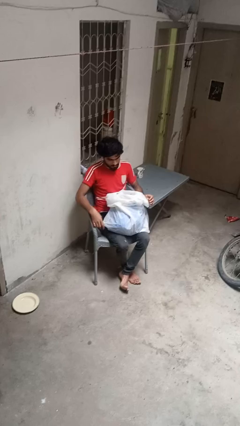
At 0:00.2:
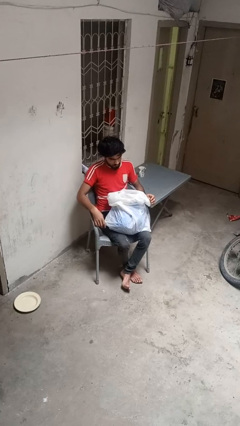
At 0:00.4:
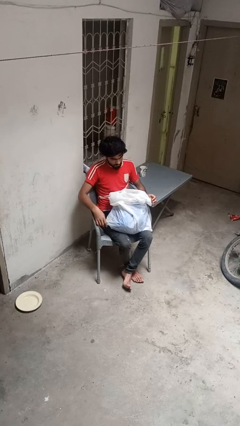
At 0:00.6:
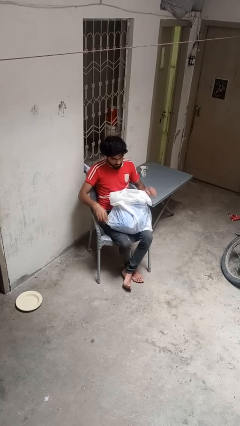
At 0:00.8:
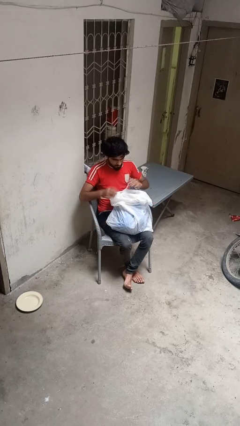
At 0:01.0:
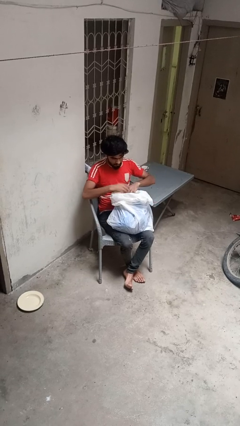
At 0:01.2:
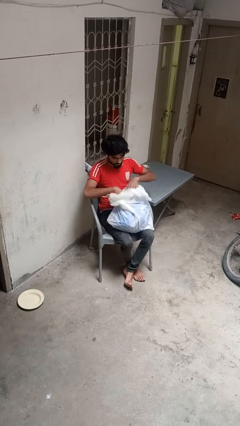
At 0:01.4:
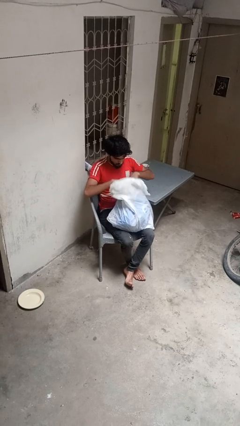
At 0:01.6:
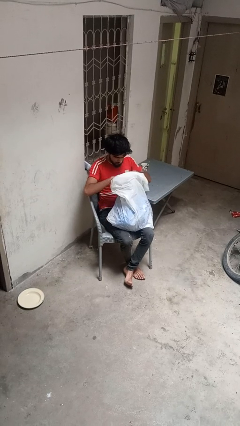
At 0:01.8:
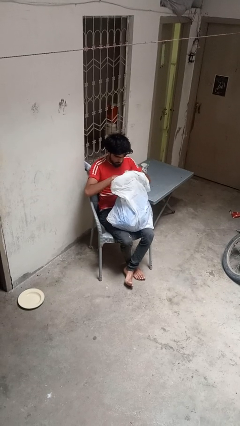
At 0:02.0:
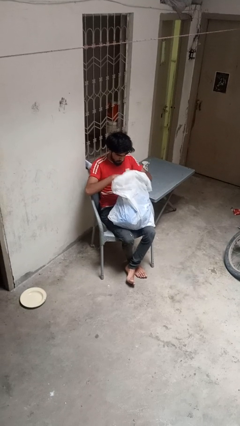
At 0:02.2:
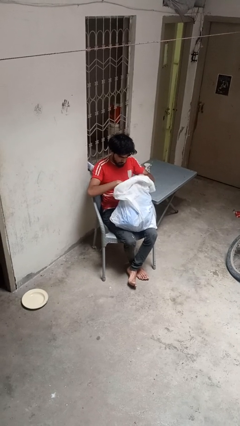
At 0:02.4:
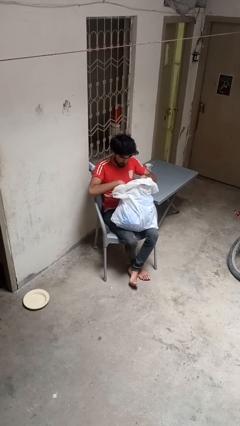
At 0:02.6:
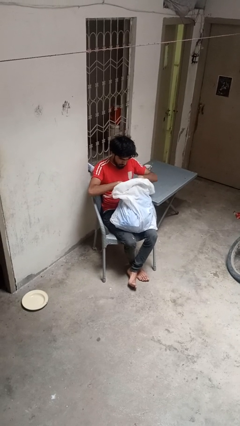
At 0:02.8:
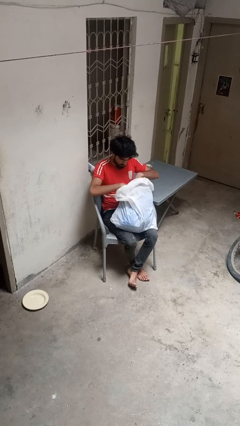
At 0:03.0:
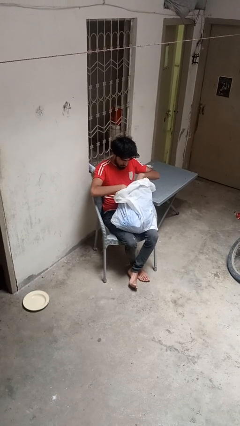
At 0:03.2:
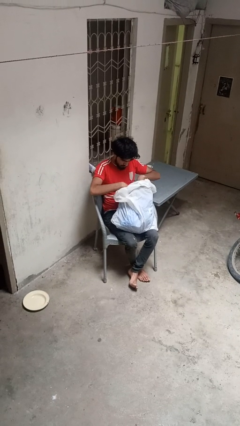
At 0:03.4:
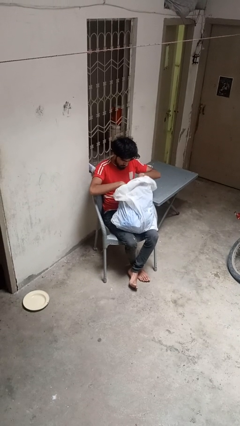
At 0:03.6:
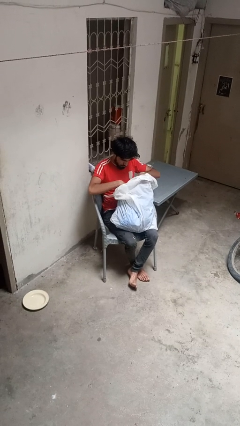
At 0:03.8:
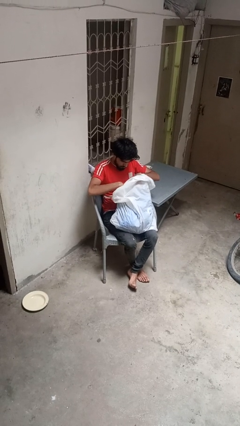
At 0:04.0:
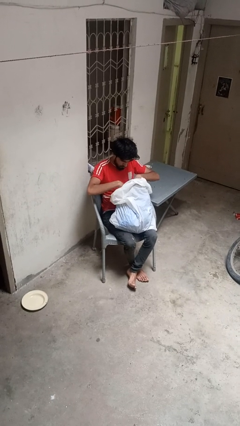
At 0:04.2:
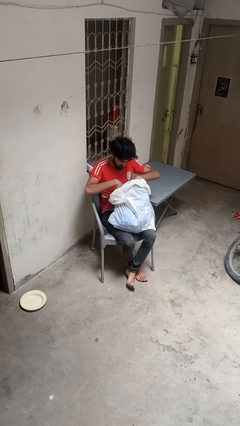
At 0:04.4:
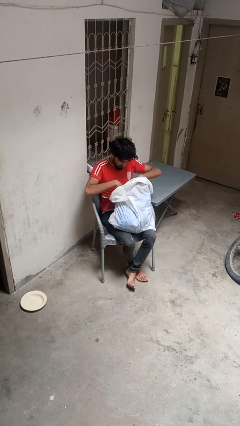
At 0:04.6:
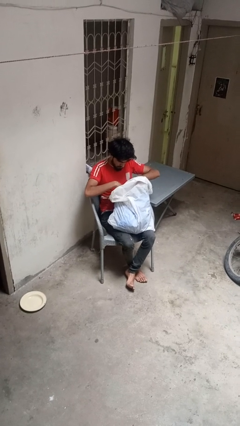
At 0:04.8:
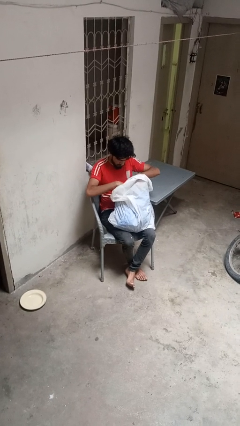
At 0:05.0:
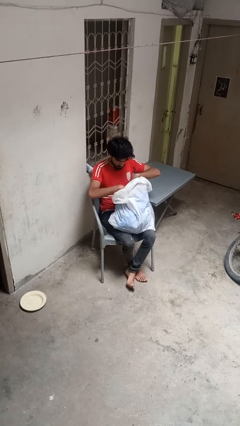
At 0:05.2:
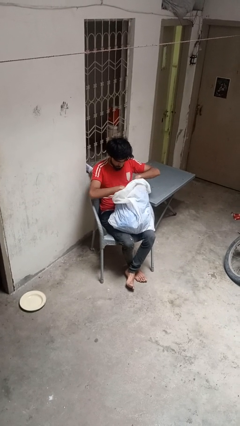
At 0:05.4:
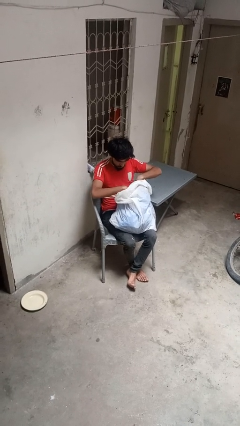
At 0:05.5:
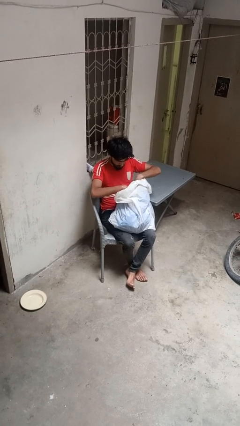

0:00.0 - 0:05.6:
person searches in bag

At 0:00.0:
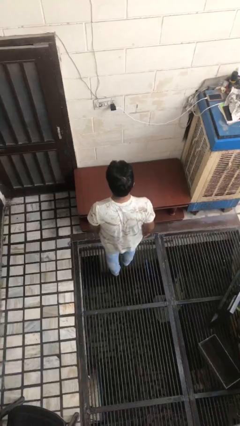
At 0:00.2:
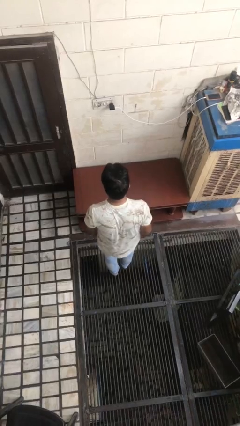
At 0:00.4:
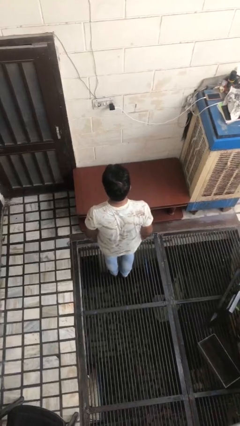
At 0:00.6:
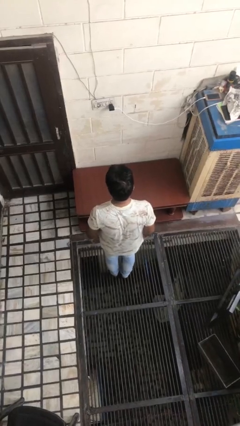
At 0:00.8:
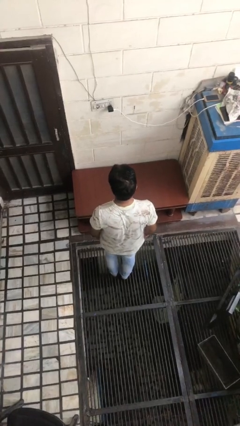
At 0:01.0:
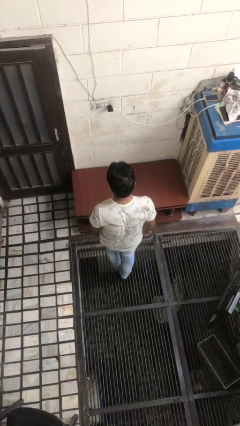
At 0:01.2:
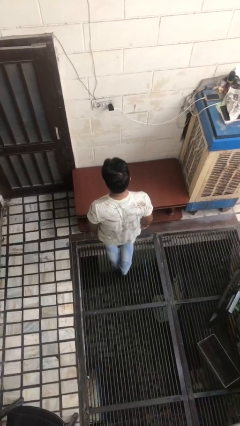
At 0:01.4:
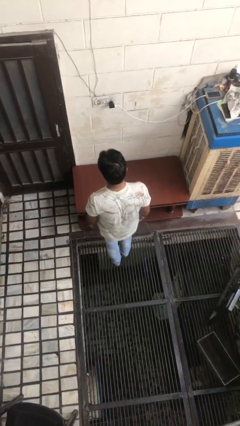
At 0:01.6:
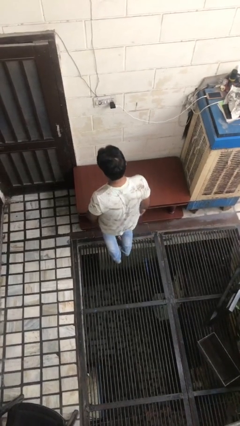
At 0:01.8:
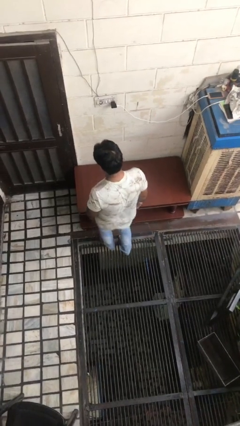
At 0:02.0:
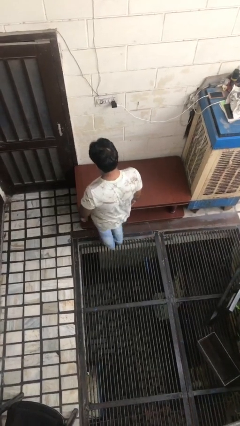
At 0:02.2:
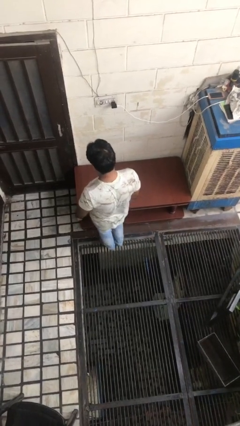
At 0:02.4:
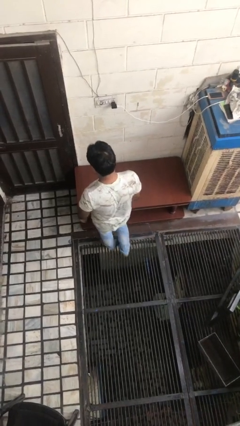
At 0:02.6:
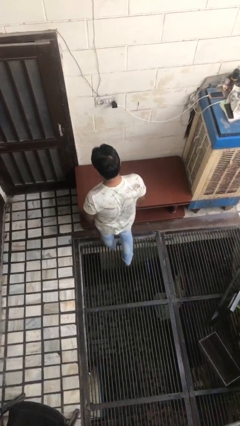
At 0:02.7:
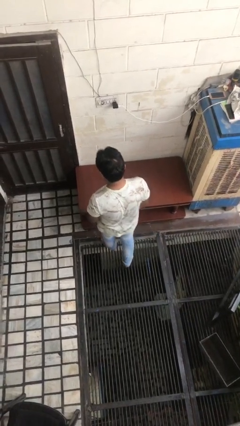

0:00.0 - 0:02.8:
person bumps into table

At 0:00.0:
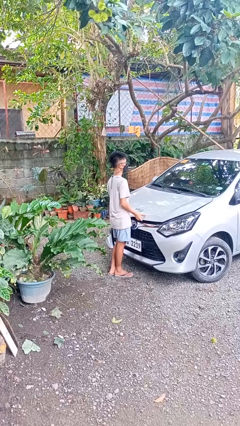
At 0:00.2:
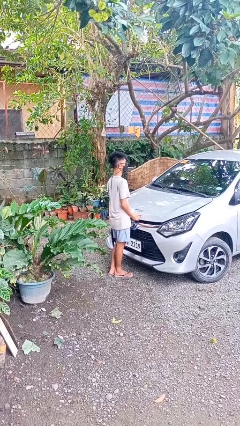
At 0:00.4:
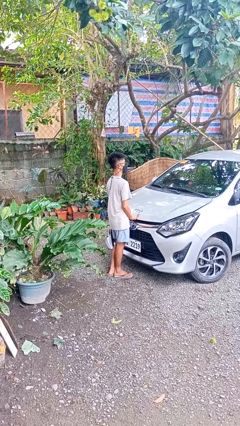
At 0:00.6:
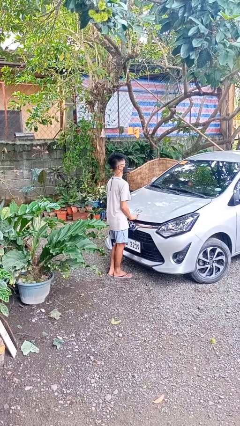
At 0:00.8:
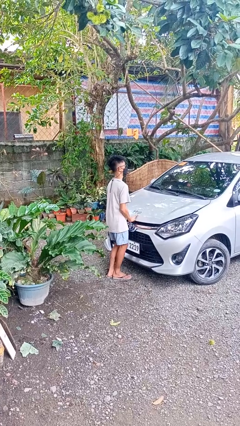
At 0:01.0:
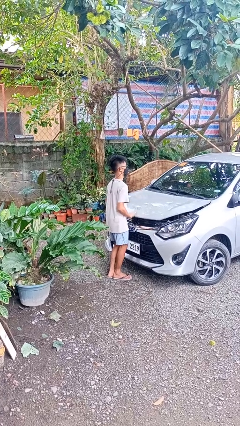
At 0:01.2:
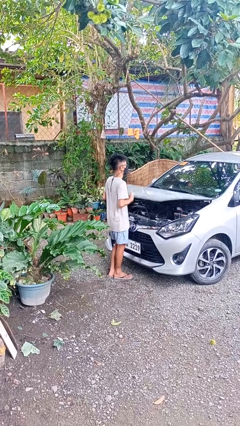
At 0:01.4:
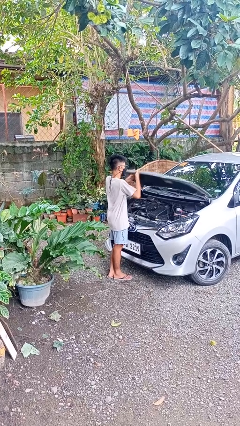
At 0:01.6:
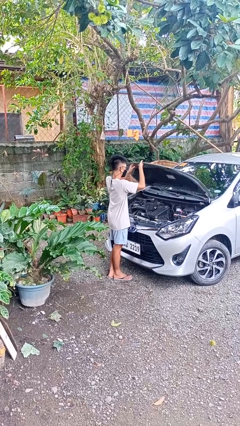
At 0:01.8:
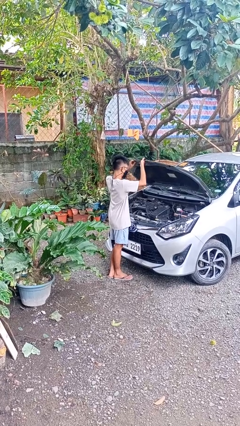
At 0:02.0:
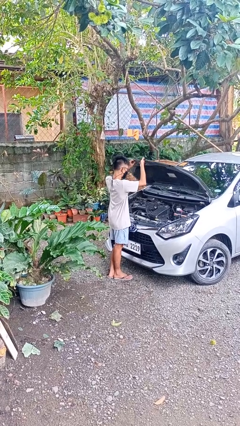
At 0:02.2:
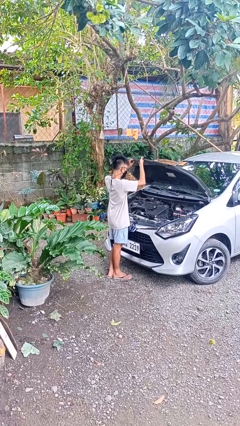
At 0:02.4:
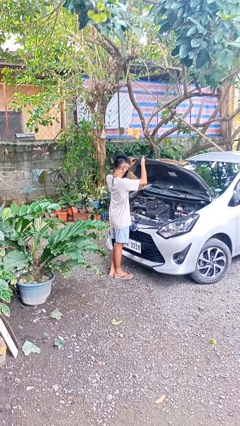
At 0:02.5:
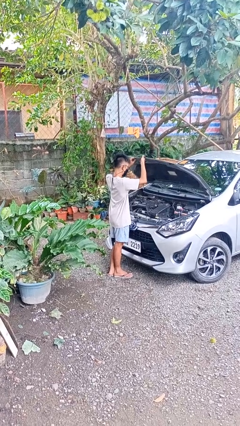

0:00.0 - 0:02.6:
person opens car hood

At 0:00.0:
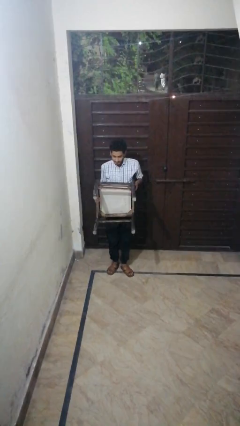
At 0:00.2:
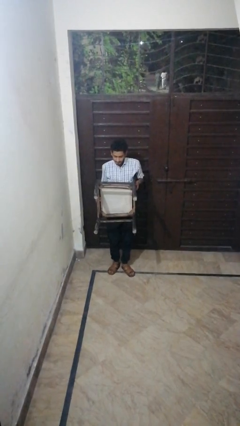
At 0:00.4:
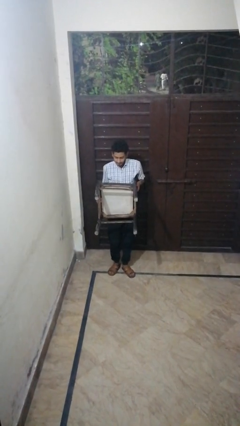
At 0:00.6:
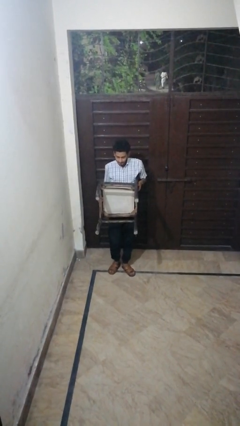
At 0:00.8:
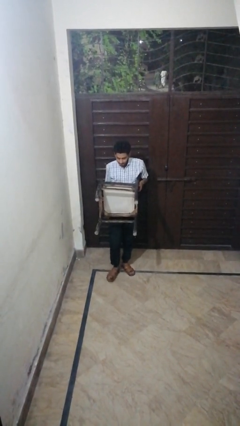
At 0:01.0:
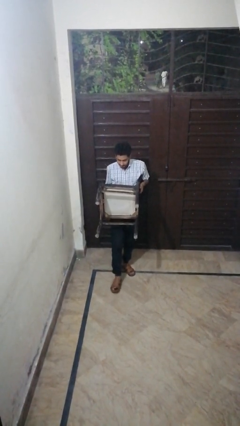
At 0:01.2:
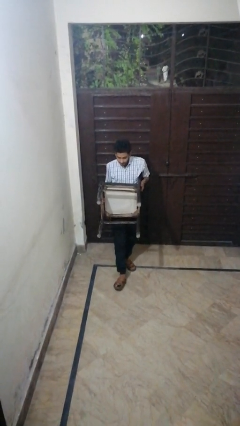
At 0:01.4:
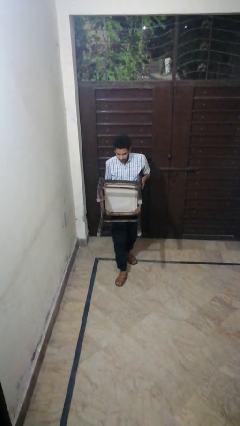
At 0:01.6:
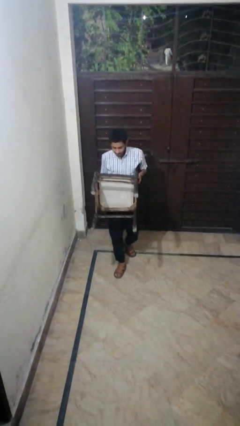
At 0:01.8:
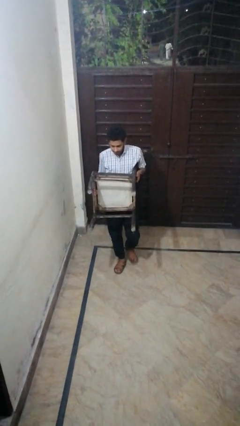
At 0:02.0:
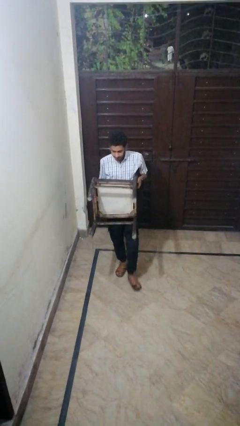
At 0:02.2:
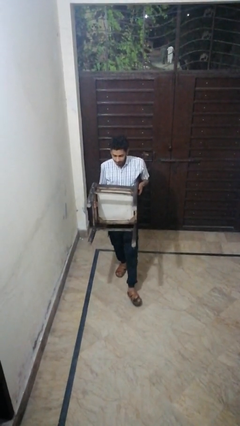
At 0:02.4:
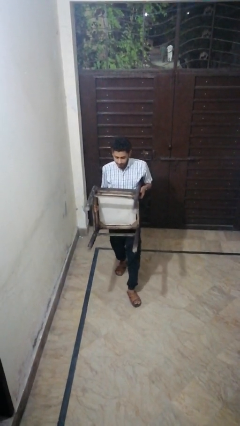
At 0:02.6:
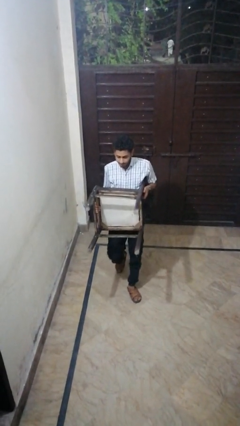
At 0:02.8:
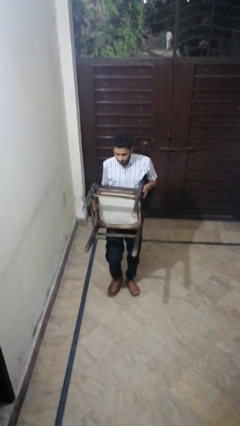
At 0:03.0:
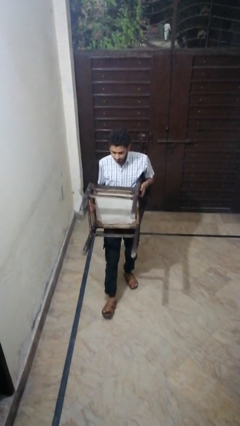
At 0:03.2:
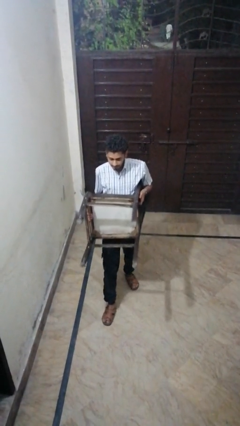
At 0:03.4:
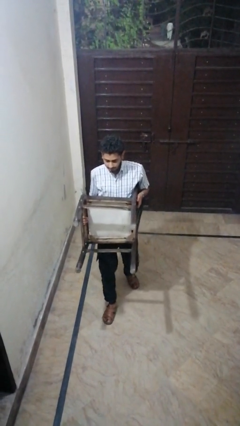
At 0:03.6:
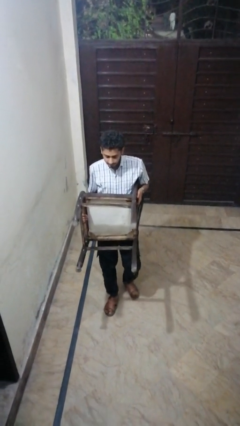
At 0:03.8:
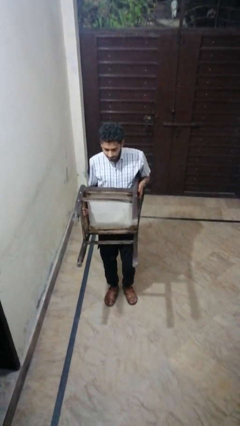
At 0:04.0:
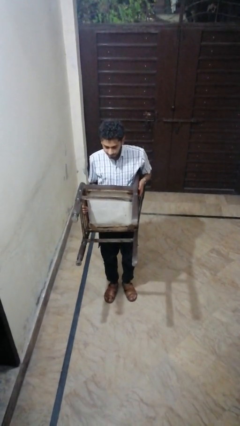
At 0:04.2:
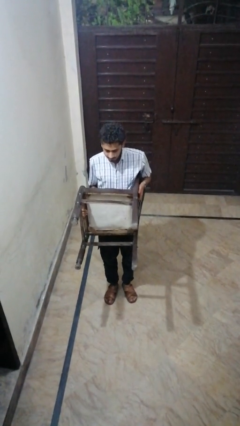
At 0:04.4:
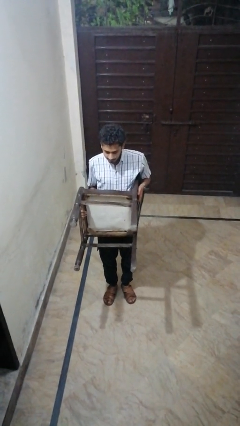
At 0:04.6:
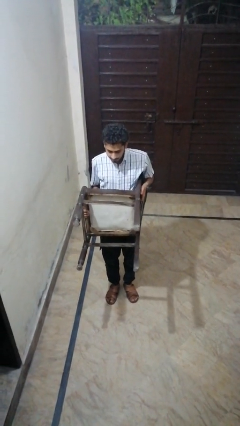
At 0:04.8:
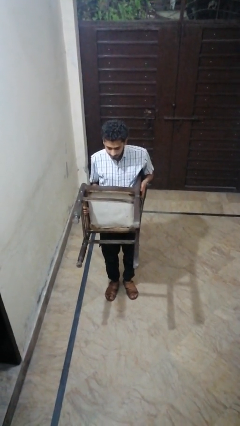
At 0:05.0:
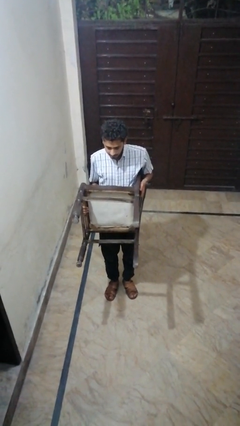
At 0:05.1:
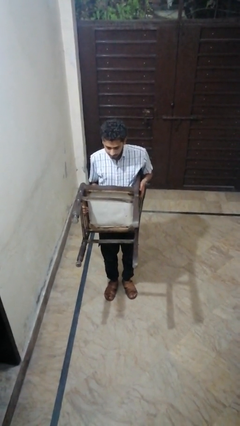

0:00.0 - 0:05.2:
person carries furniture

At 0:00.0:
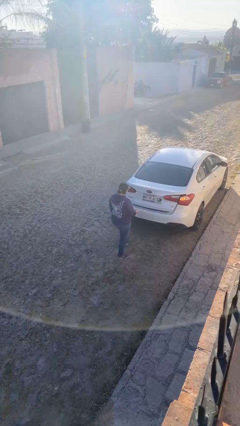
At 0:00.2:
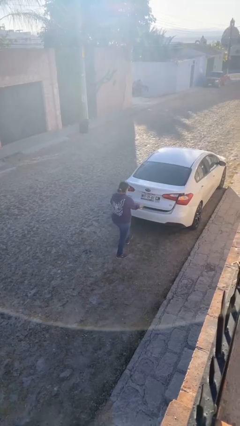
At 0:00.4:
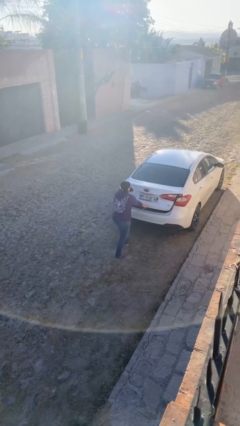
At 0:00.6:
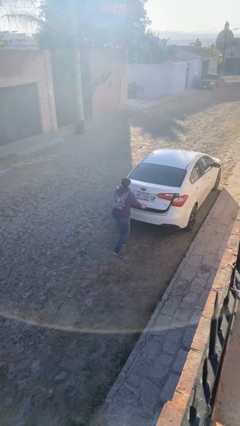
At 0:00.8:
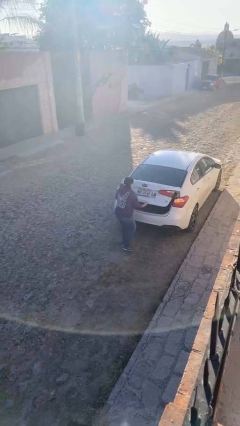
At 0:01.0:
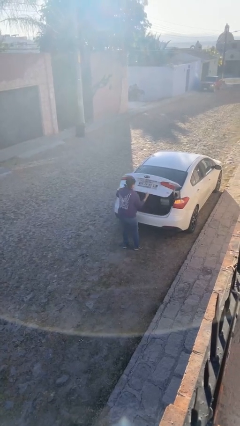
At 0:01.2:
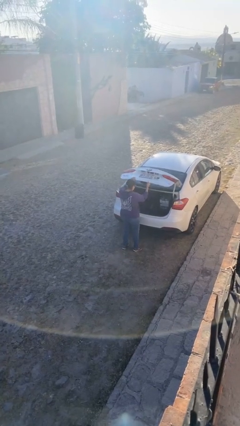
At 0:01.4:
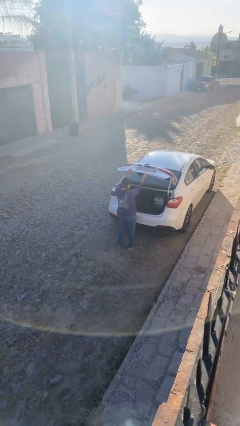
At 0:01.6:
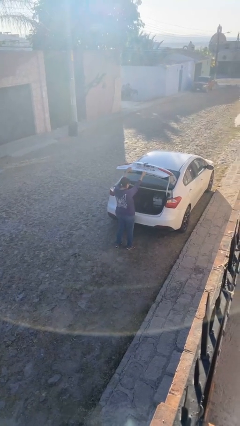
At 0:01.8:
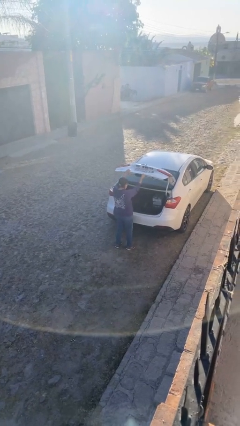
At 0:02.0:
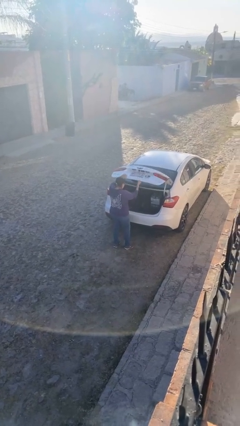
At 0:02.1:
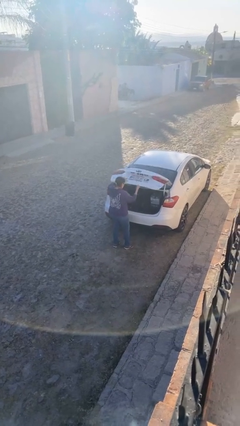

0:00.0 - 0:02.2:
person opens car trunk
